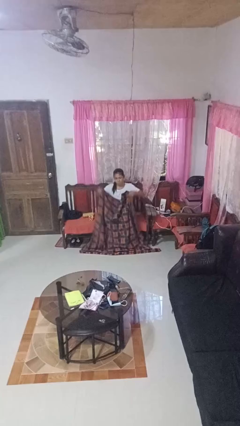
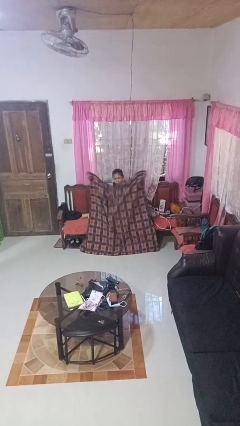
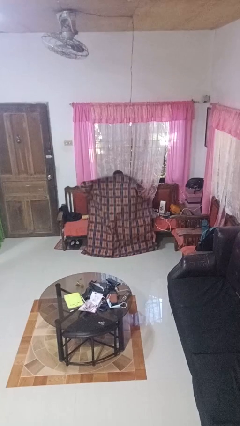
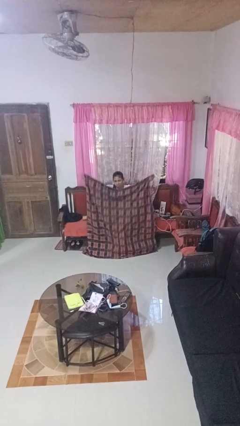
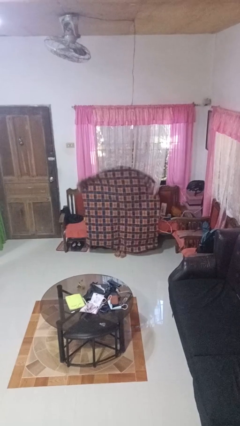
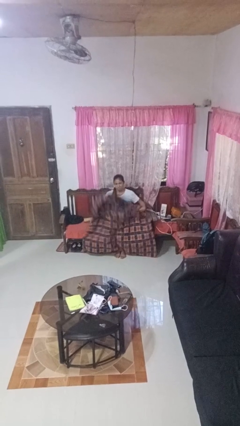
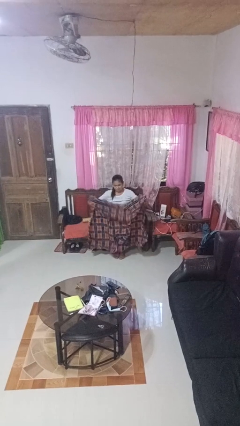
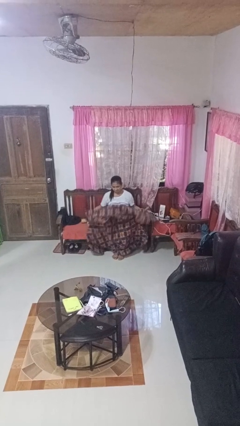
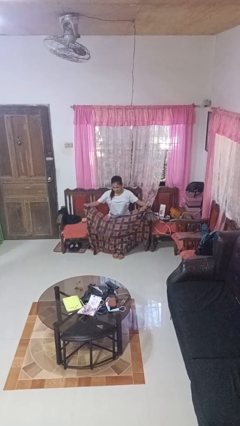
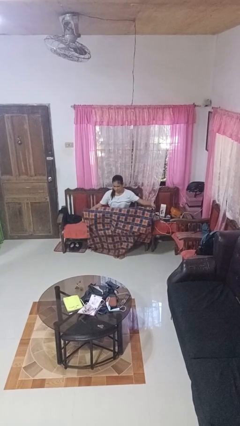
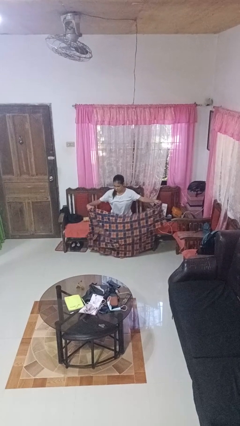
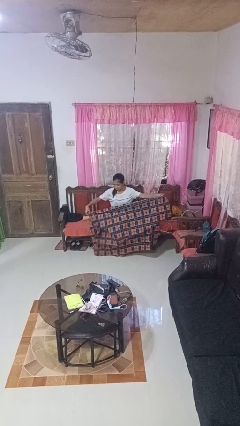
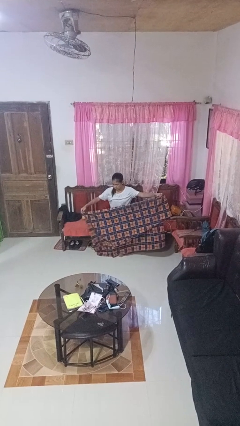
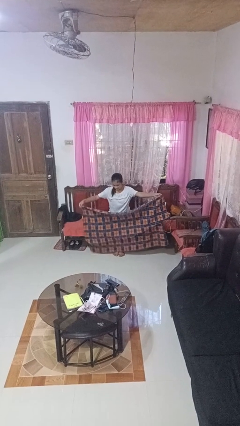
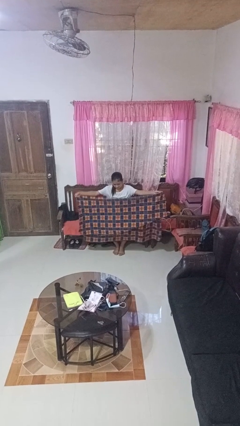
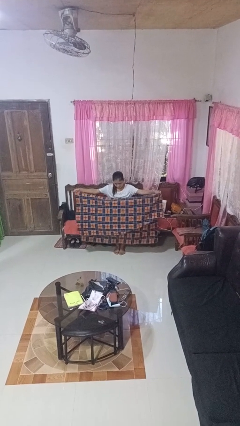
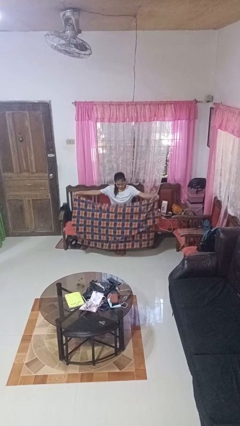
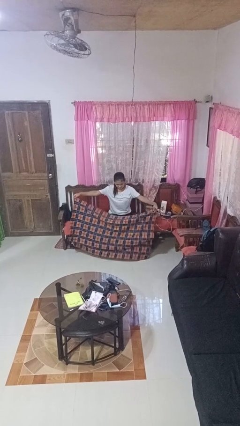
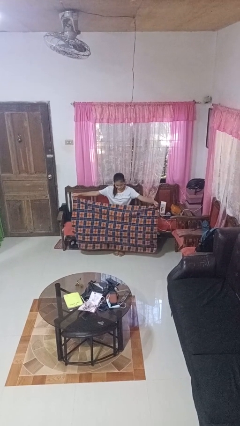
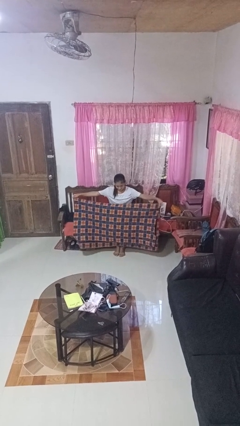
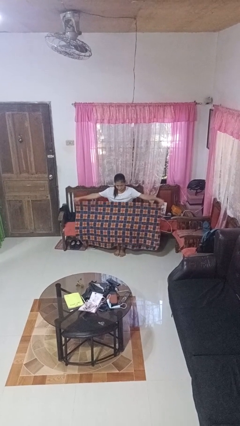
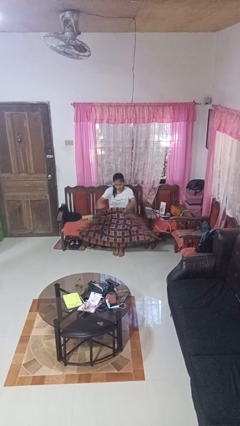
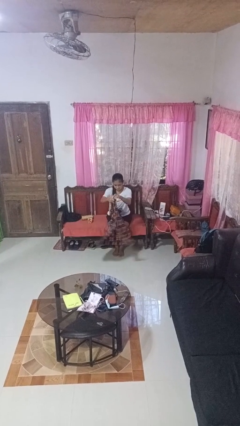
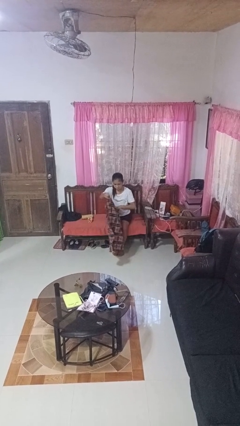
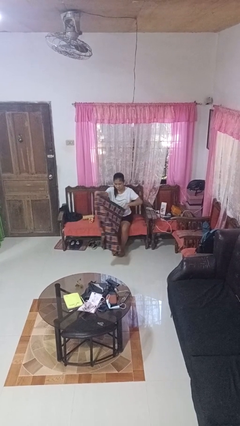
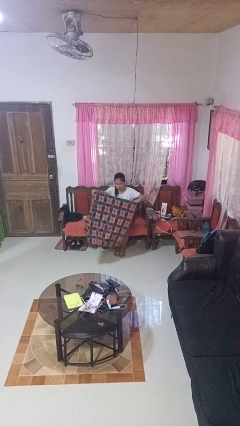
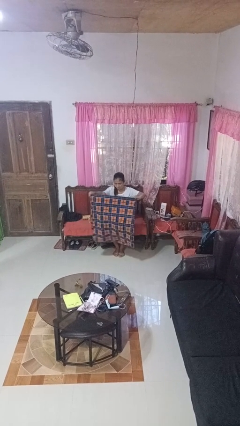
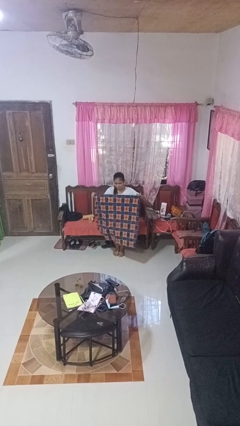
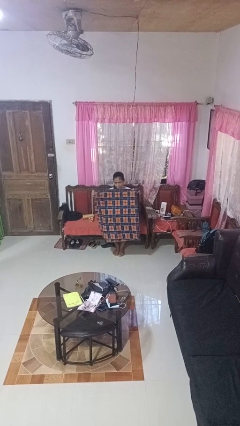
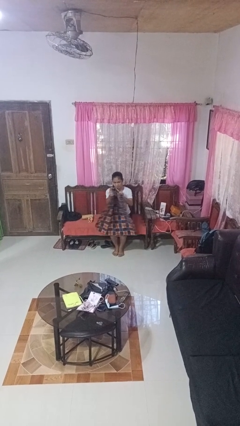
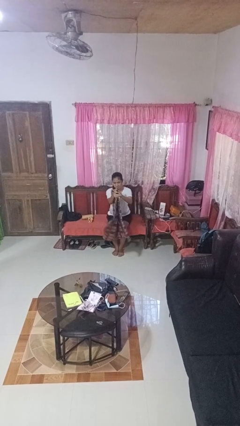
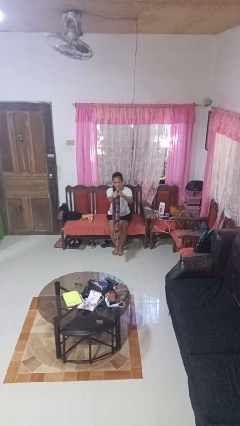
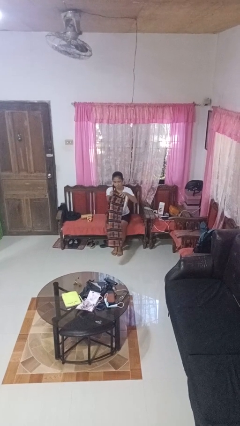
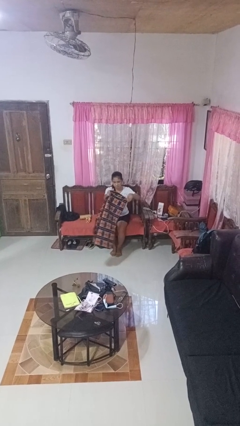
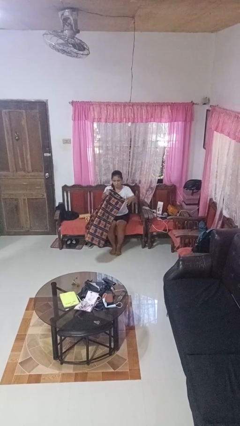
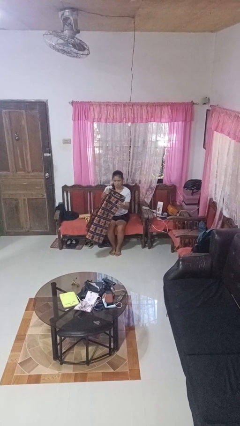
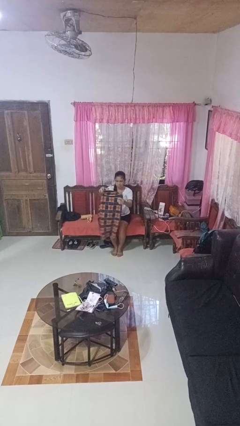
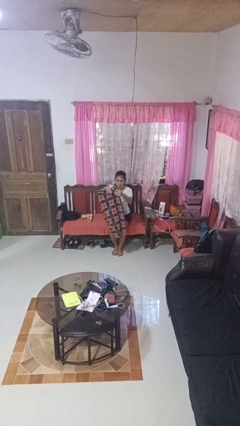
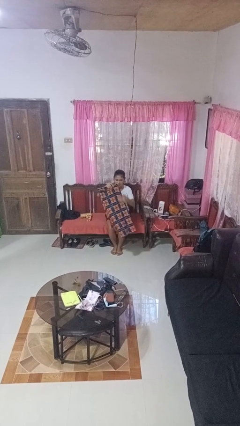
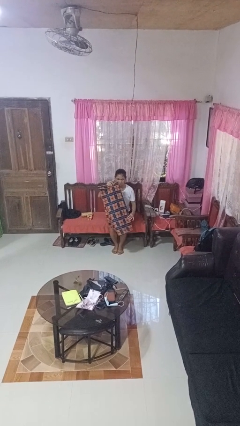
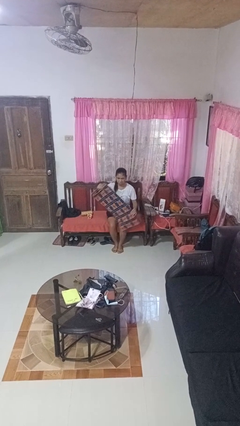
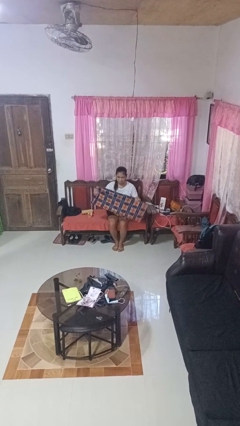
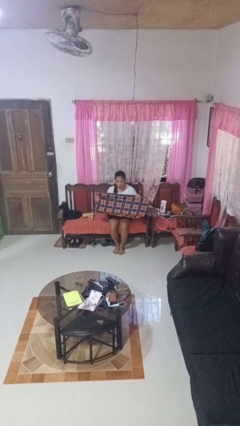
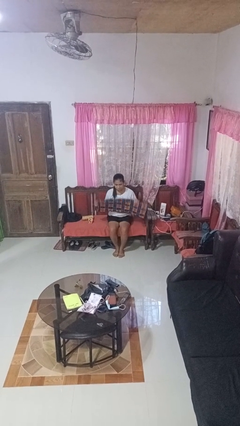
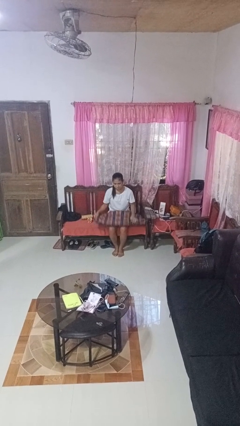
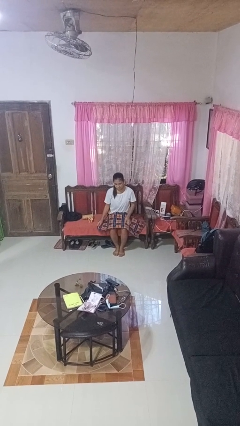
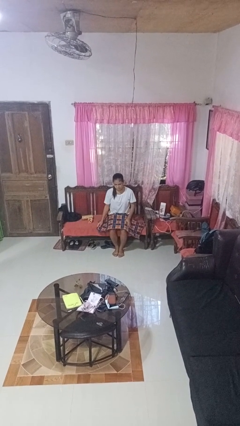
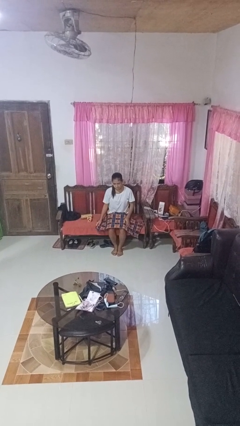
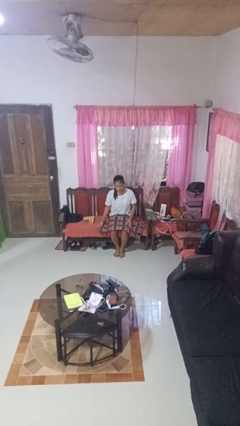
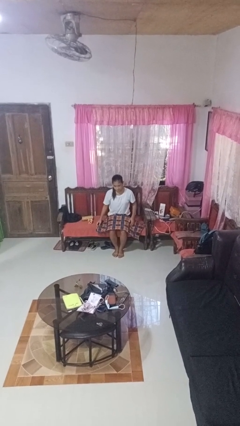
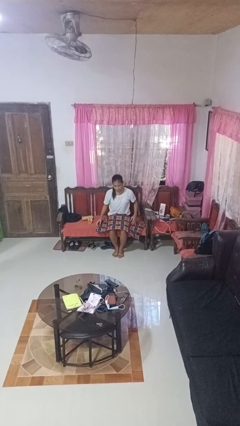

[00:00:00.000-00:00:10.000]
person folds blanket

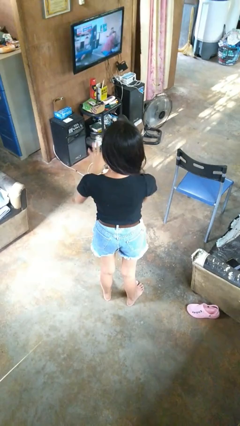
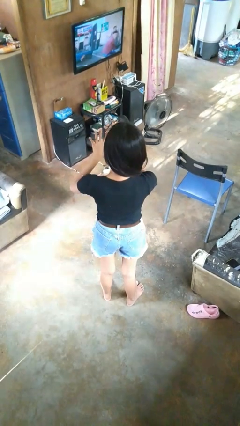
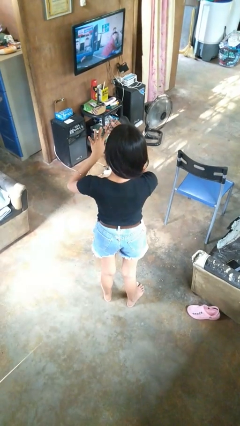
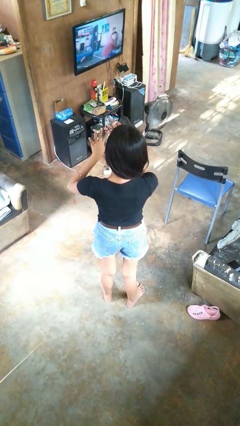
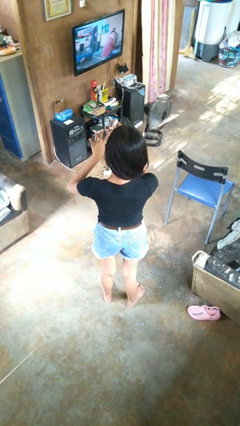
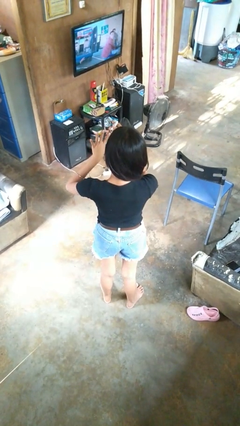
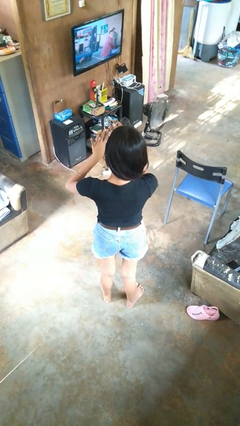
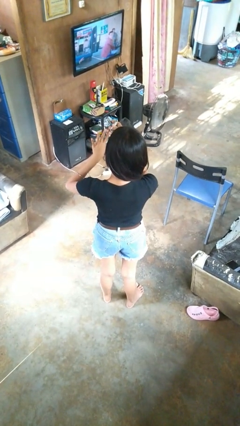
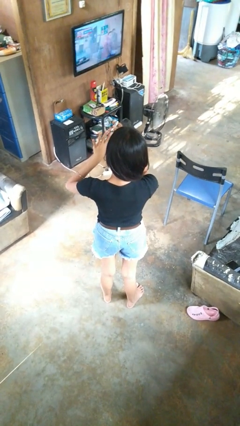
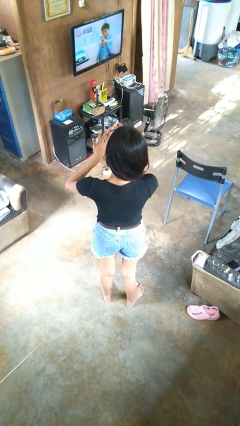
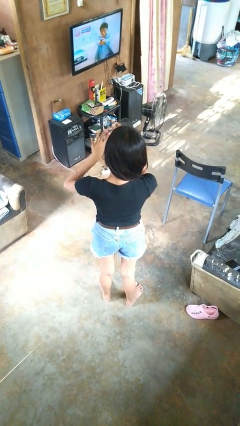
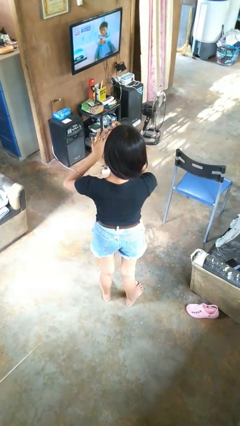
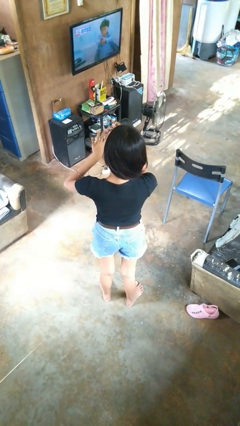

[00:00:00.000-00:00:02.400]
person clips fingernails

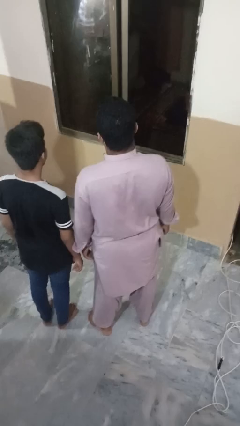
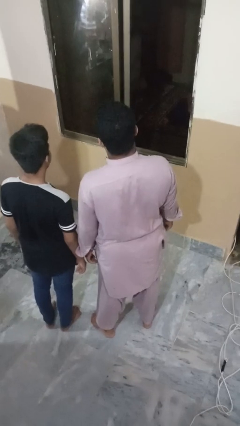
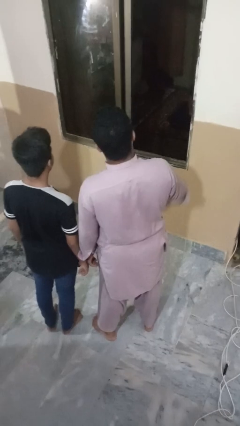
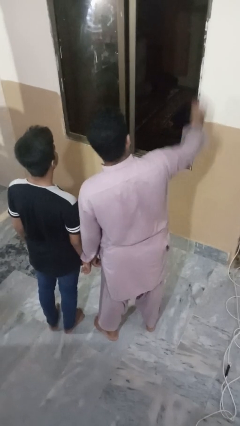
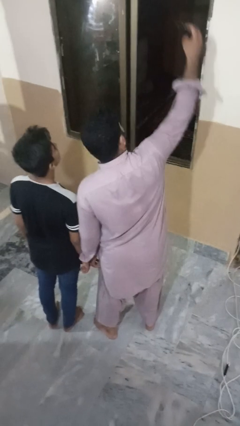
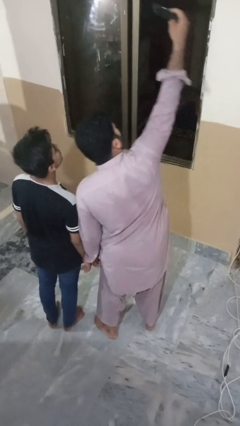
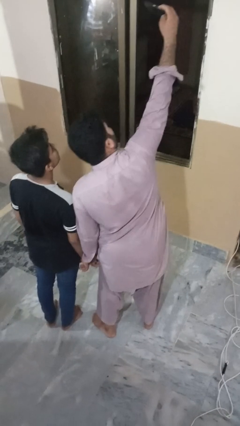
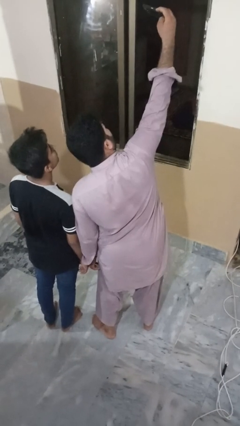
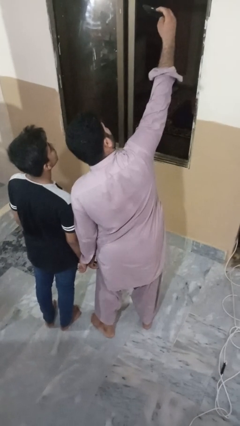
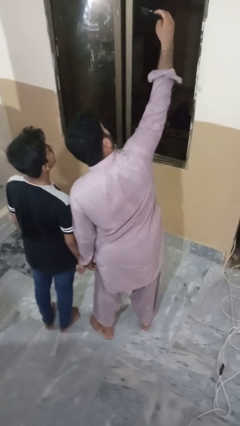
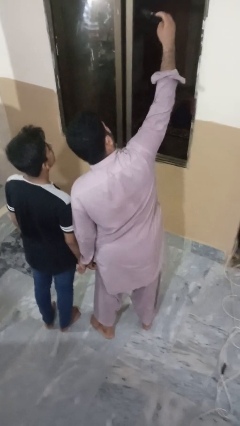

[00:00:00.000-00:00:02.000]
person takes selfie with person

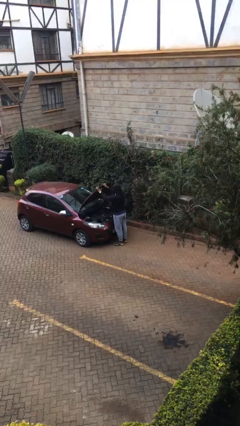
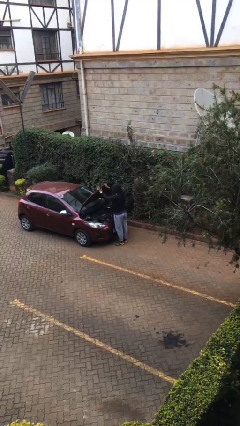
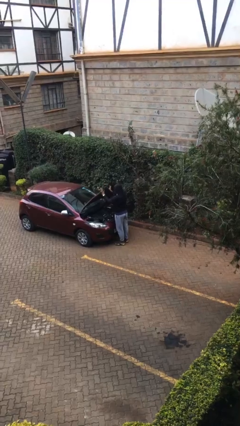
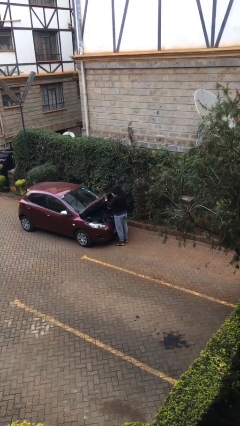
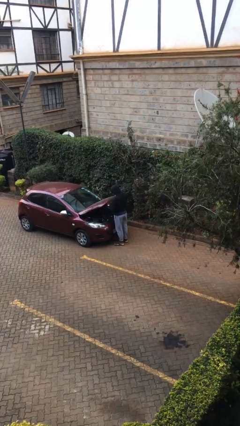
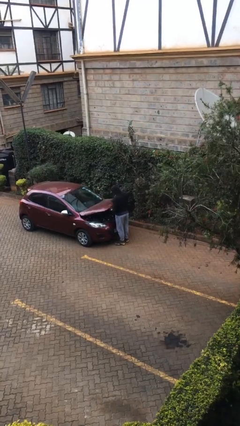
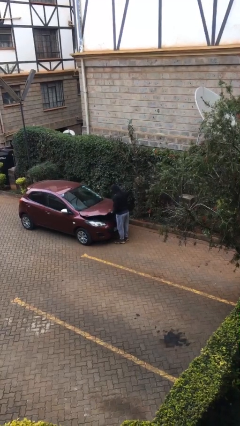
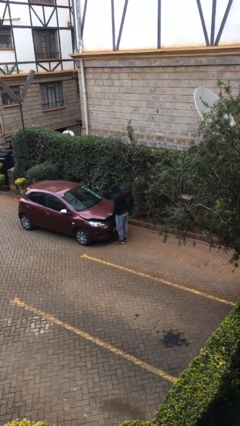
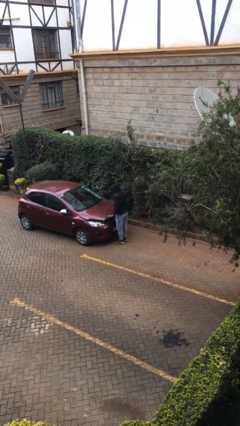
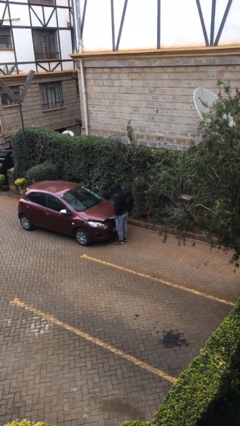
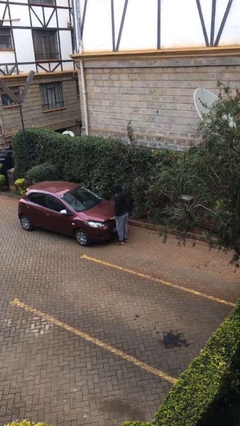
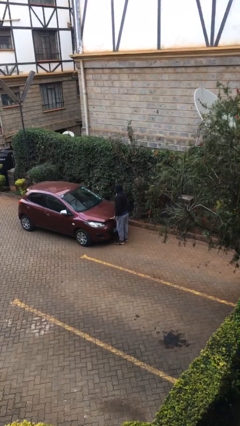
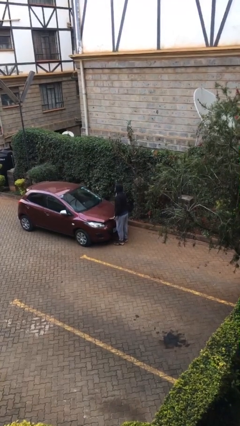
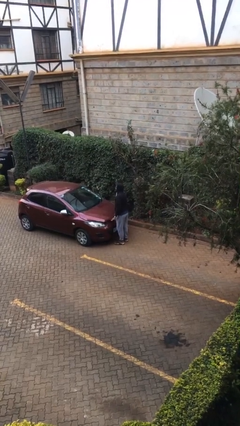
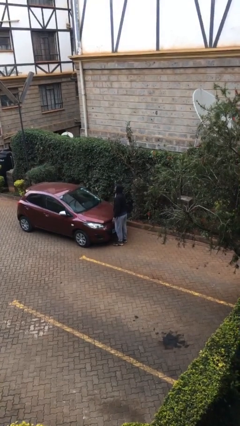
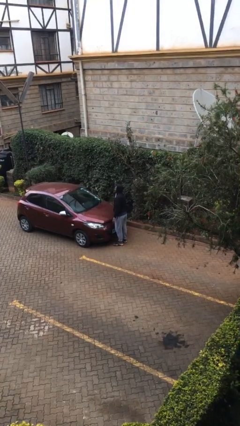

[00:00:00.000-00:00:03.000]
person closes car hood

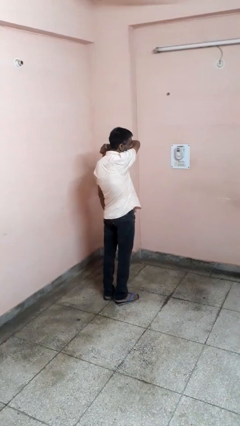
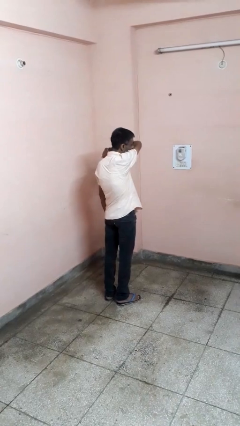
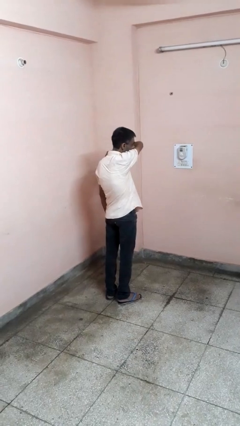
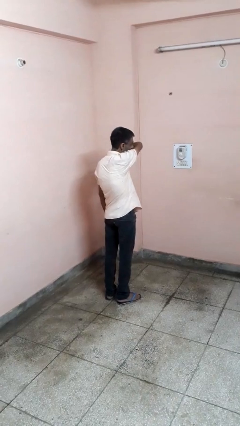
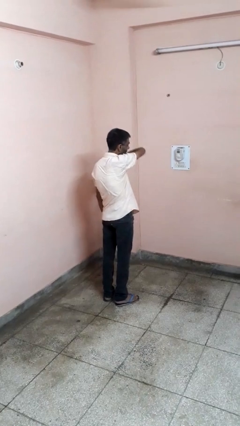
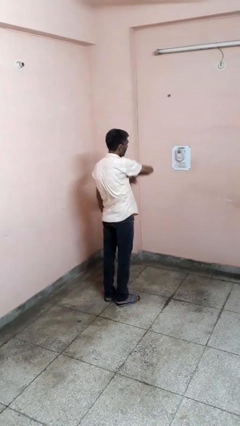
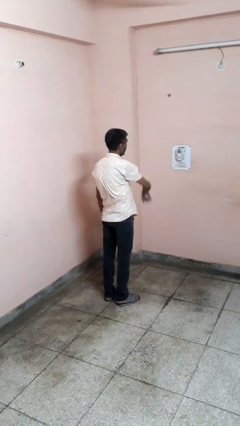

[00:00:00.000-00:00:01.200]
person sneezes into arm
